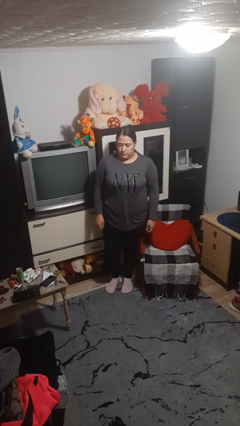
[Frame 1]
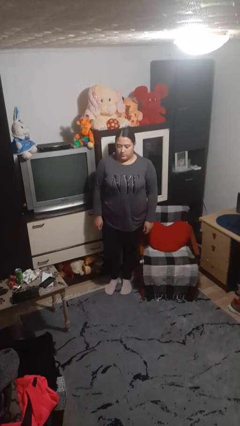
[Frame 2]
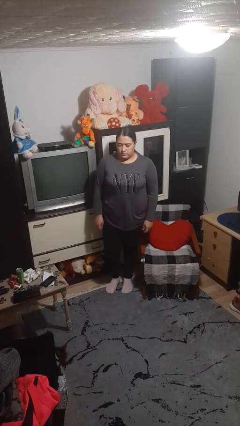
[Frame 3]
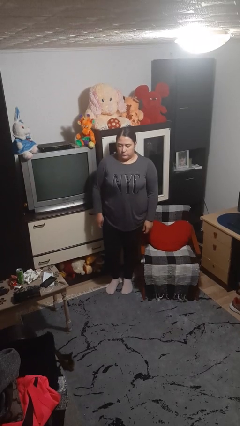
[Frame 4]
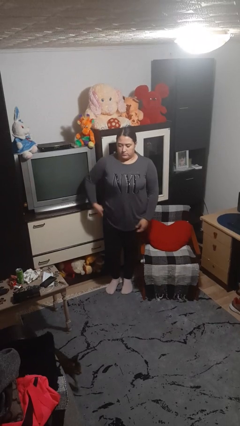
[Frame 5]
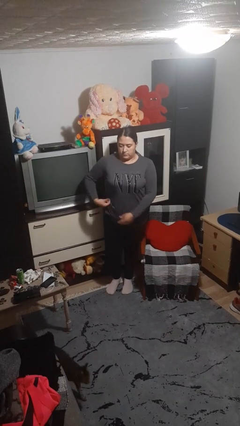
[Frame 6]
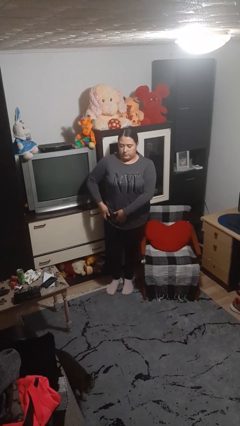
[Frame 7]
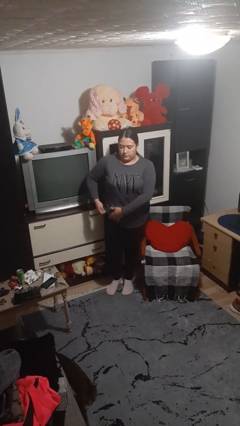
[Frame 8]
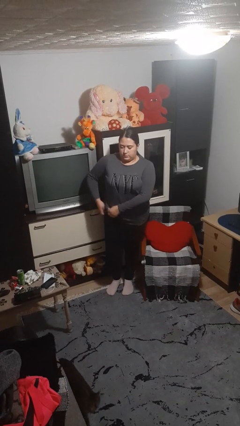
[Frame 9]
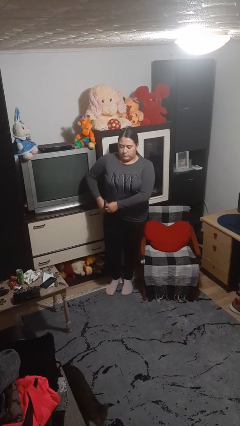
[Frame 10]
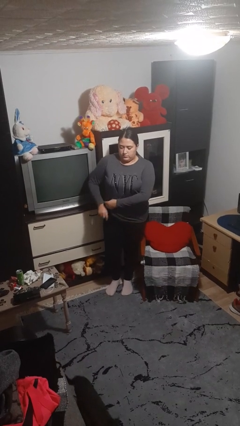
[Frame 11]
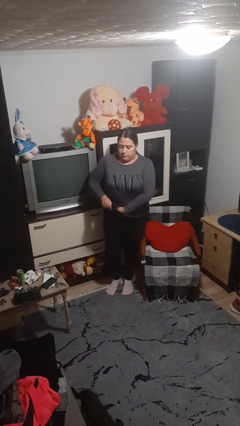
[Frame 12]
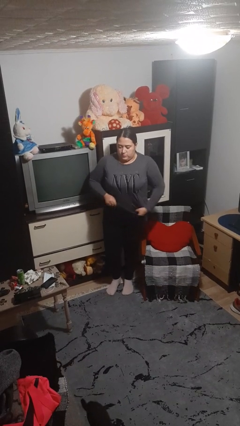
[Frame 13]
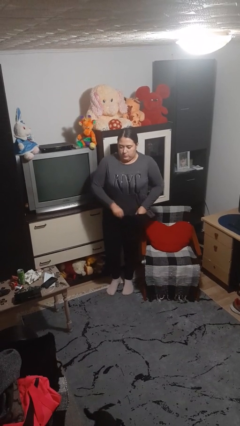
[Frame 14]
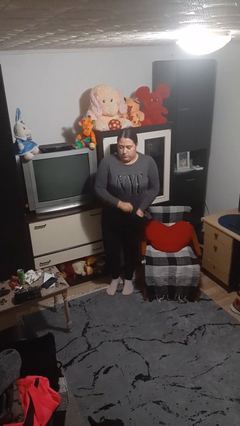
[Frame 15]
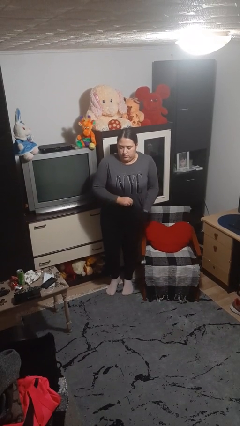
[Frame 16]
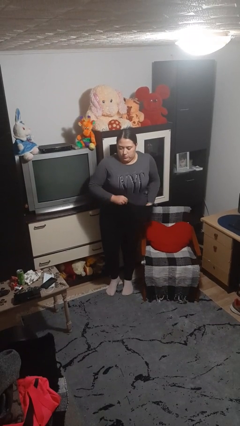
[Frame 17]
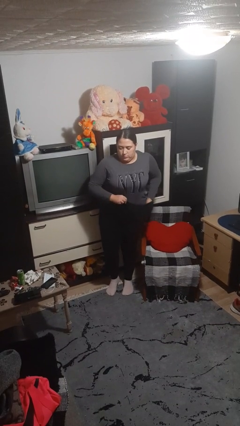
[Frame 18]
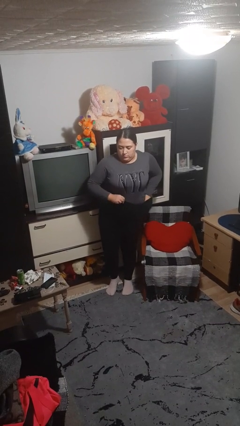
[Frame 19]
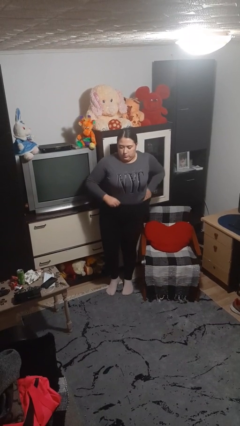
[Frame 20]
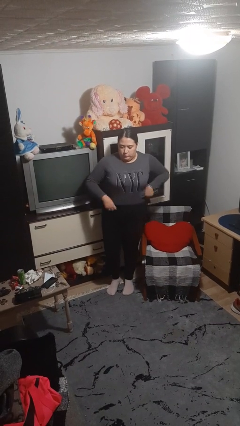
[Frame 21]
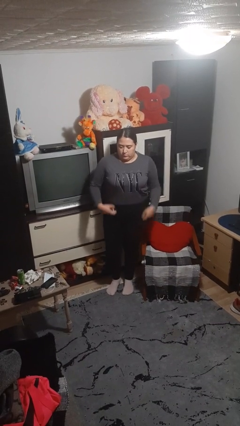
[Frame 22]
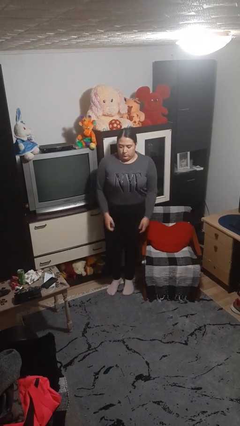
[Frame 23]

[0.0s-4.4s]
person tucks in shirt

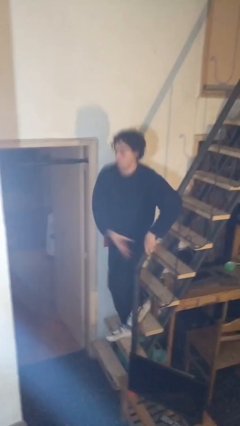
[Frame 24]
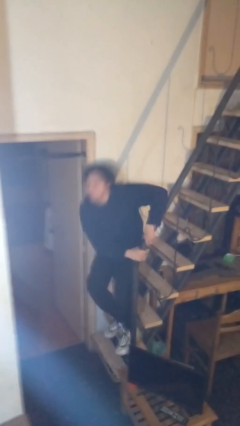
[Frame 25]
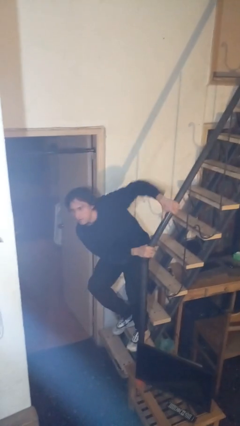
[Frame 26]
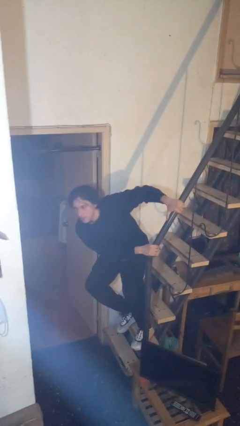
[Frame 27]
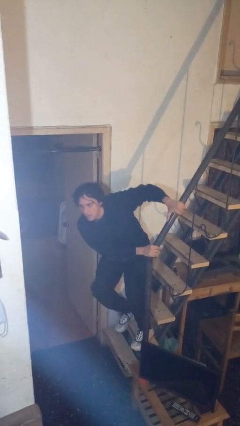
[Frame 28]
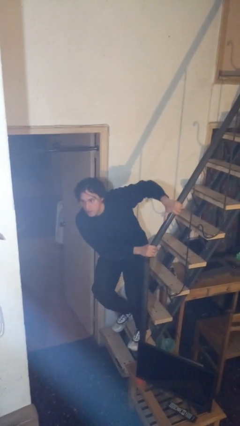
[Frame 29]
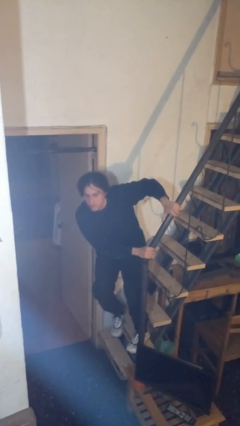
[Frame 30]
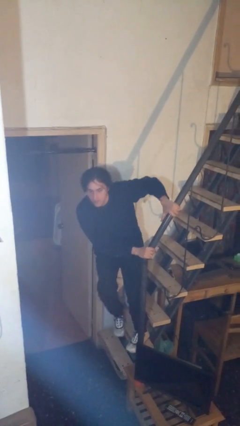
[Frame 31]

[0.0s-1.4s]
person trips on stair

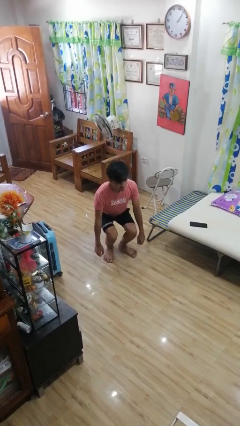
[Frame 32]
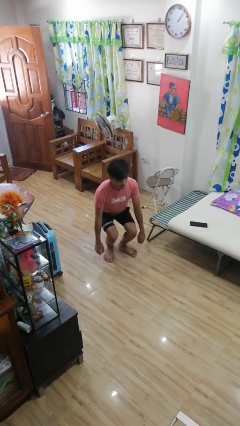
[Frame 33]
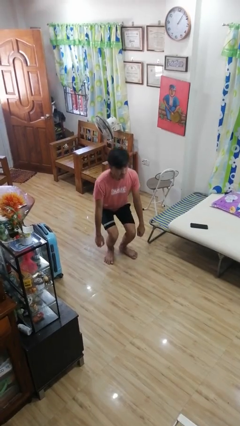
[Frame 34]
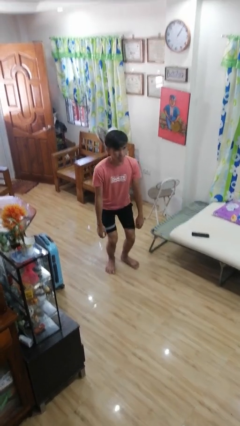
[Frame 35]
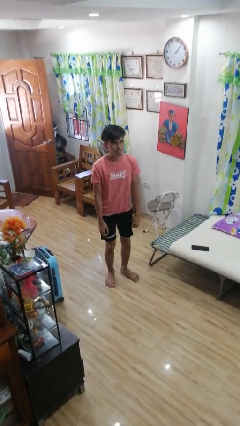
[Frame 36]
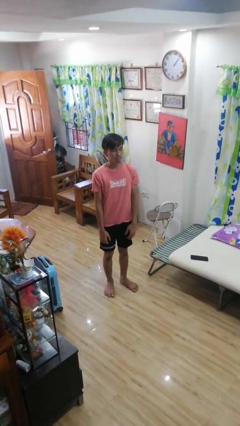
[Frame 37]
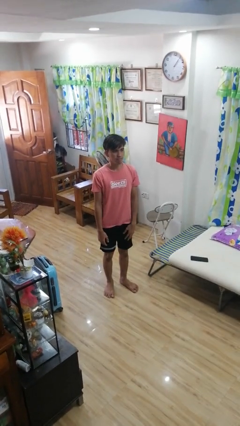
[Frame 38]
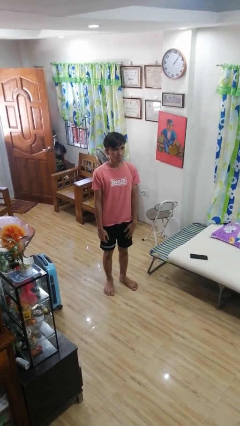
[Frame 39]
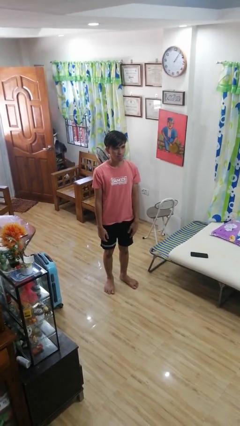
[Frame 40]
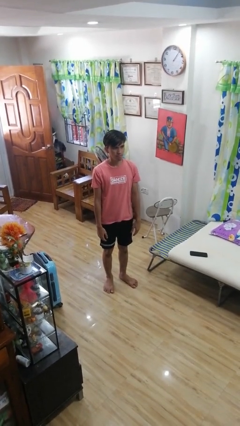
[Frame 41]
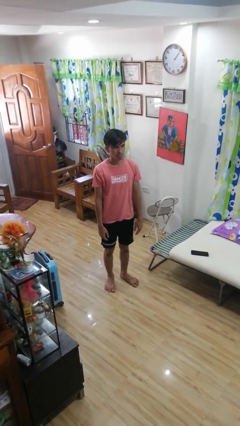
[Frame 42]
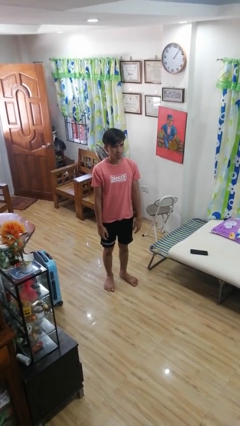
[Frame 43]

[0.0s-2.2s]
person stands up

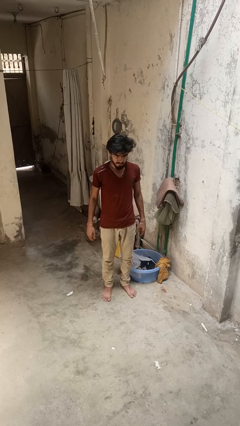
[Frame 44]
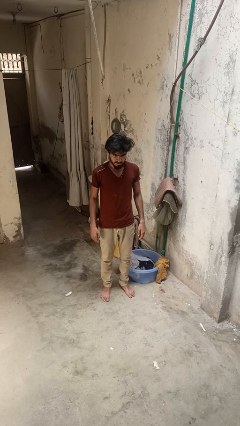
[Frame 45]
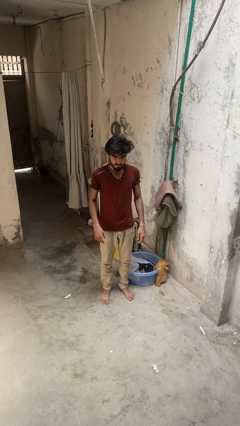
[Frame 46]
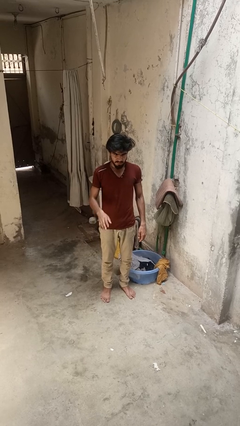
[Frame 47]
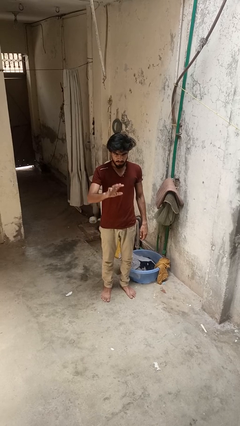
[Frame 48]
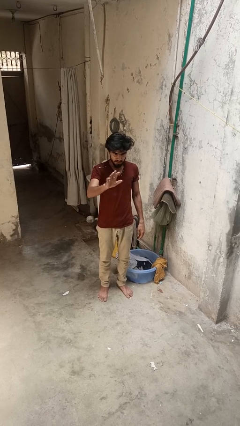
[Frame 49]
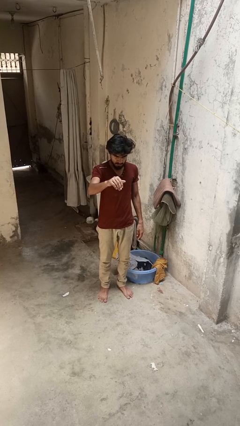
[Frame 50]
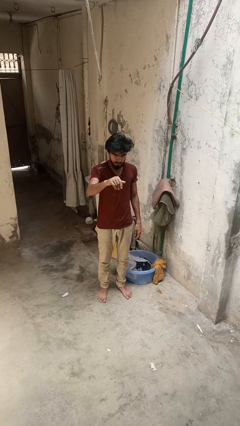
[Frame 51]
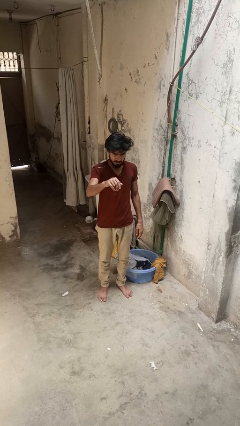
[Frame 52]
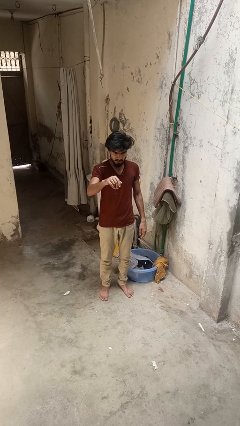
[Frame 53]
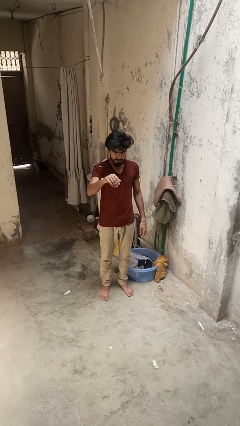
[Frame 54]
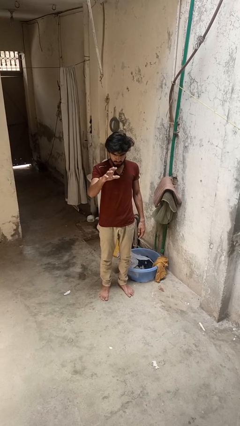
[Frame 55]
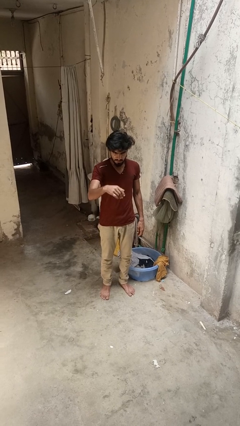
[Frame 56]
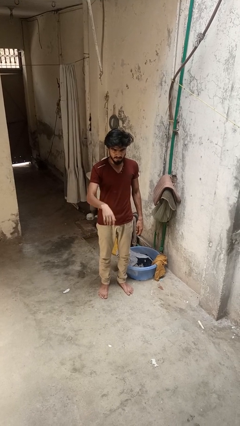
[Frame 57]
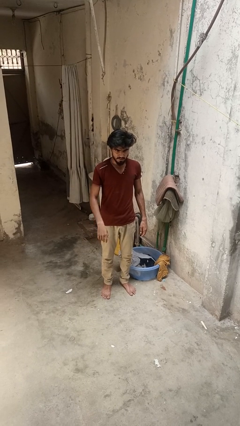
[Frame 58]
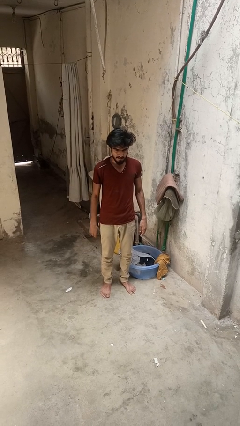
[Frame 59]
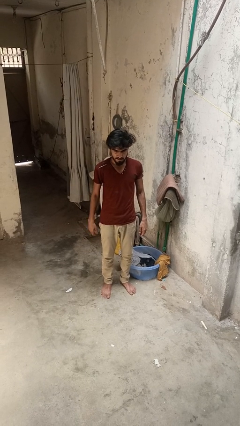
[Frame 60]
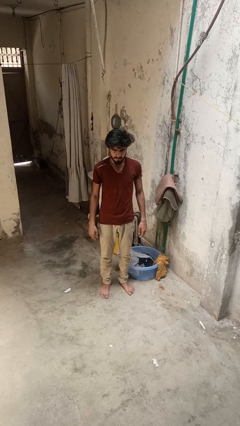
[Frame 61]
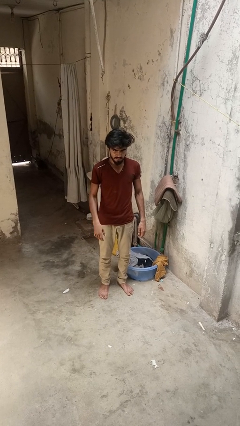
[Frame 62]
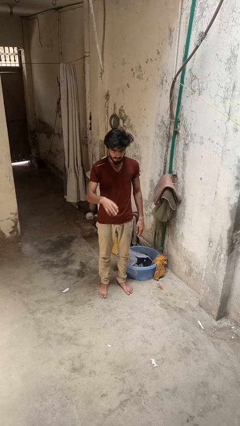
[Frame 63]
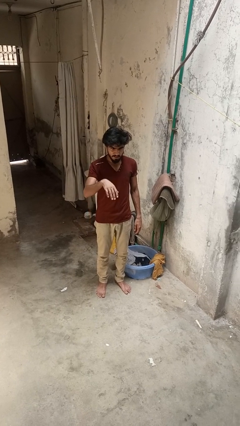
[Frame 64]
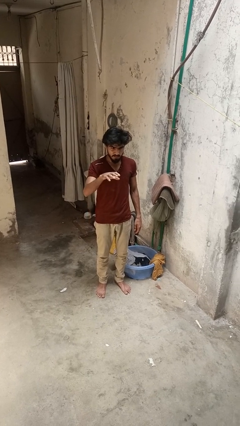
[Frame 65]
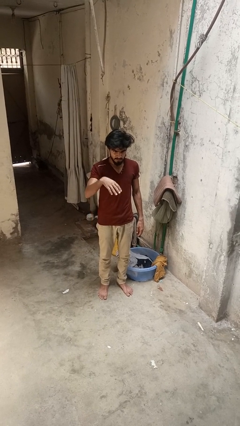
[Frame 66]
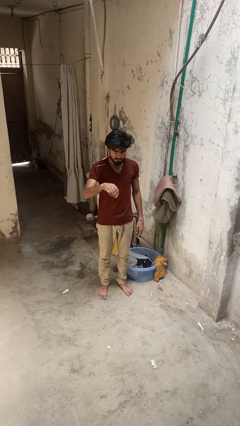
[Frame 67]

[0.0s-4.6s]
person gestures come here

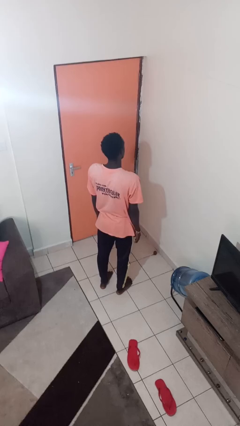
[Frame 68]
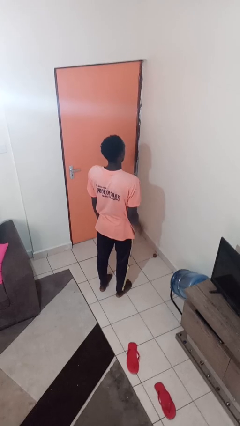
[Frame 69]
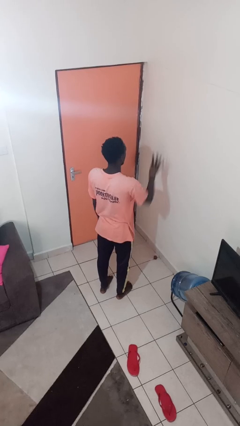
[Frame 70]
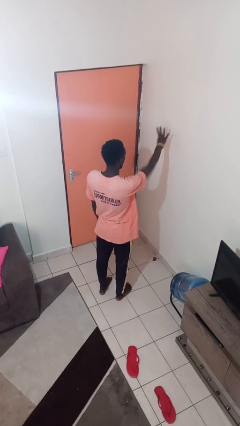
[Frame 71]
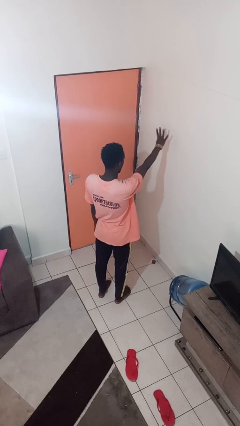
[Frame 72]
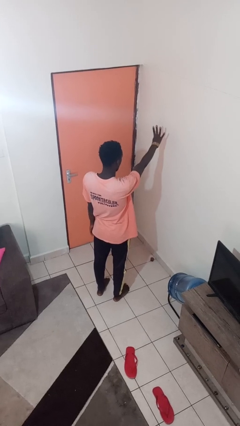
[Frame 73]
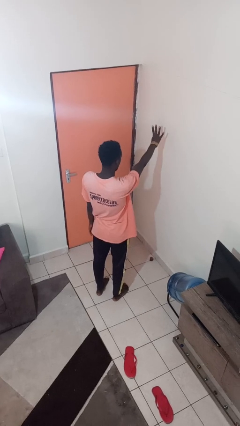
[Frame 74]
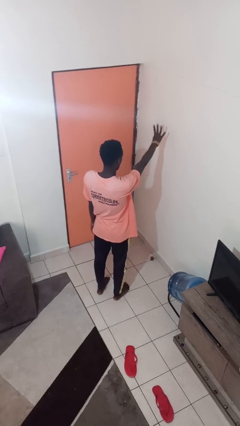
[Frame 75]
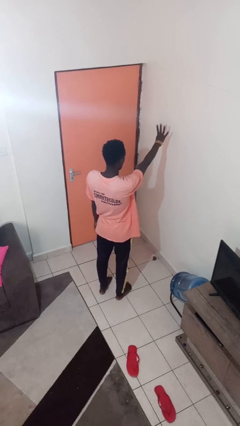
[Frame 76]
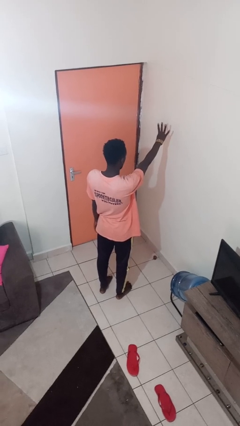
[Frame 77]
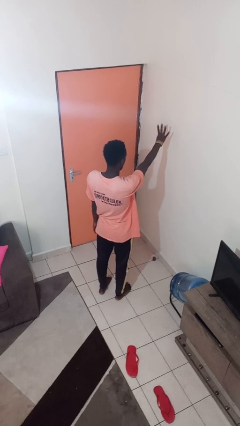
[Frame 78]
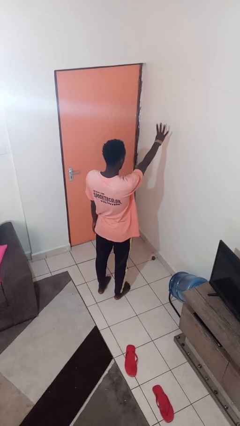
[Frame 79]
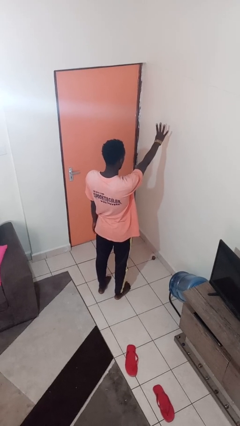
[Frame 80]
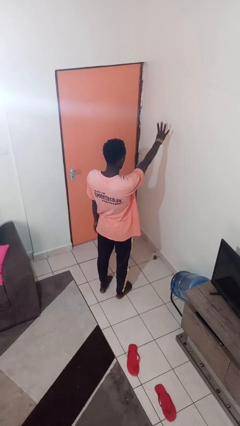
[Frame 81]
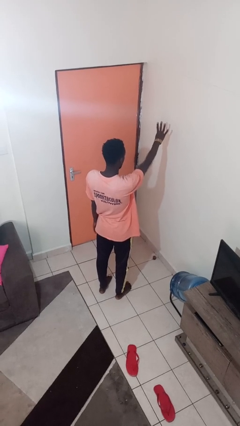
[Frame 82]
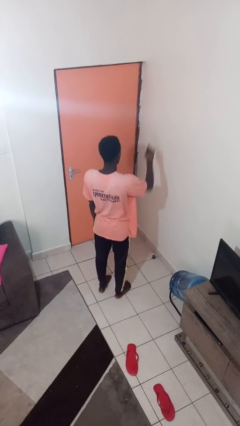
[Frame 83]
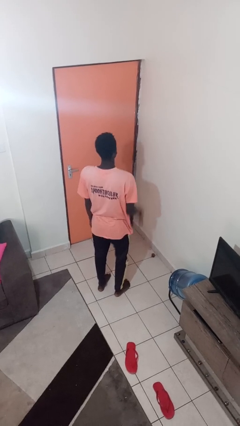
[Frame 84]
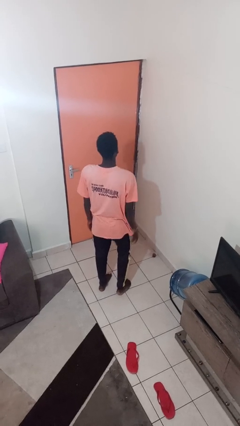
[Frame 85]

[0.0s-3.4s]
person gestures number four

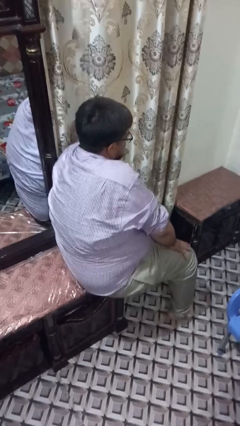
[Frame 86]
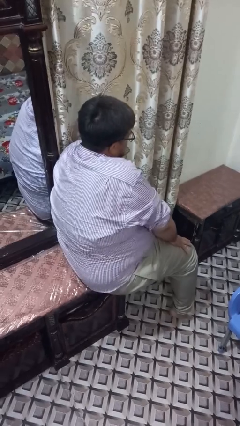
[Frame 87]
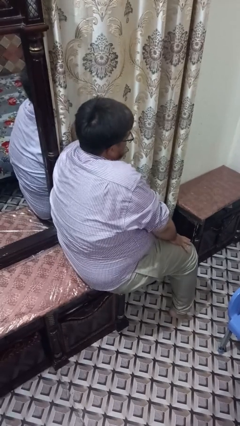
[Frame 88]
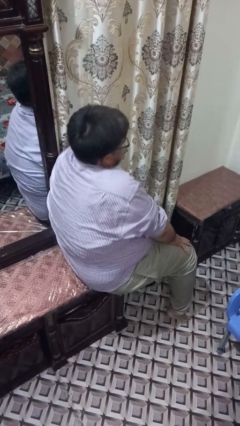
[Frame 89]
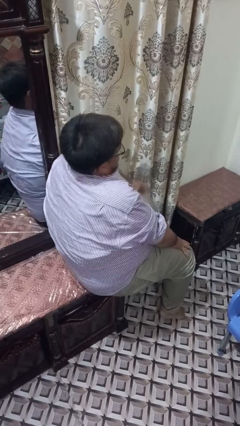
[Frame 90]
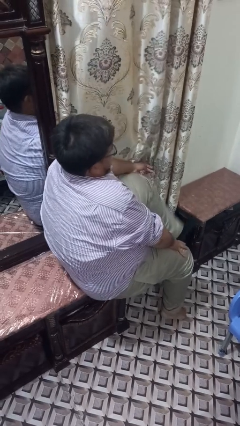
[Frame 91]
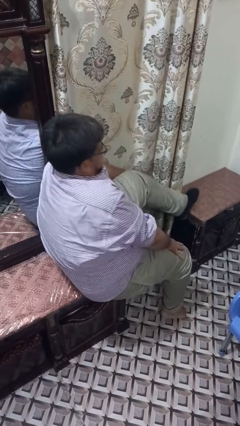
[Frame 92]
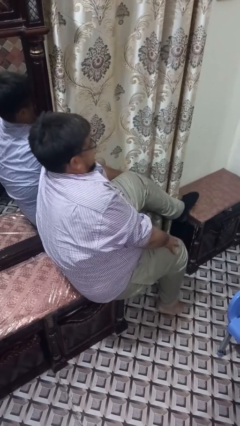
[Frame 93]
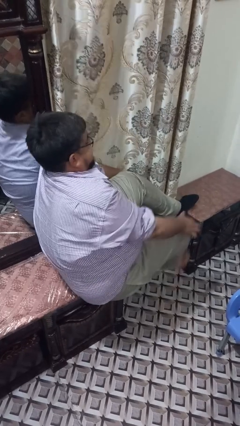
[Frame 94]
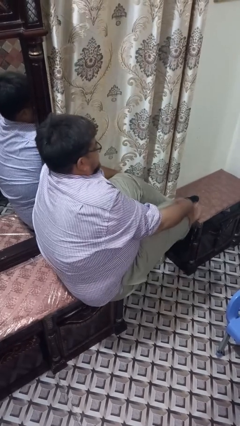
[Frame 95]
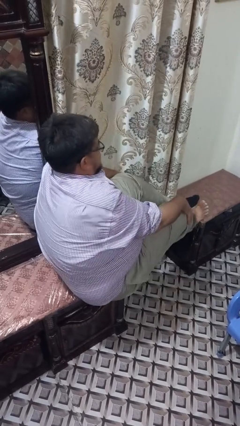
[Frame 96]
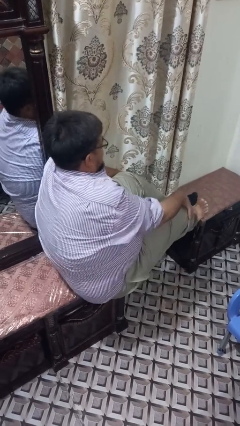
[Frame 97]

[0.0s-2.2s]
person puts feet up
